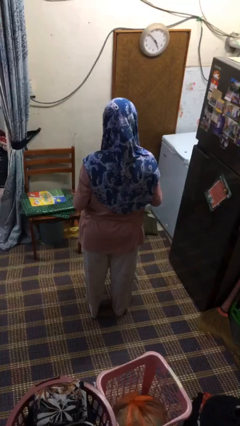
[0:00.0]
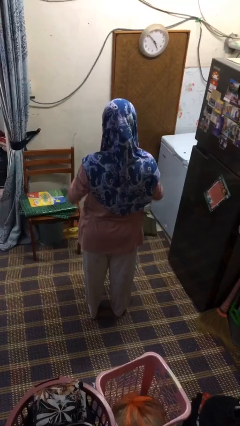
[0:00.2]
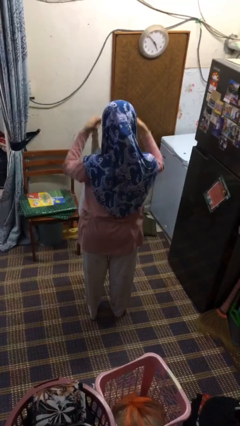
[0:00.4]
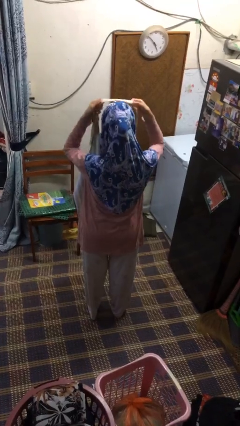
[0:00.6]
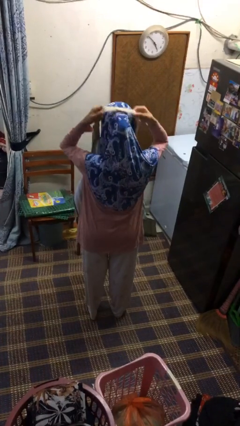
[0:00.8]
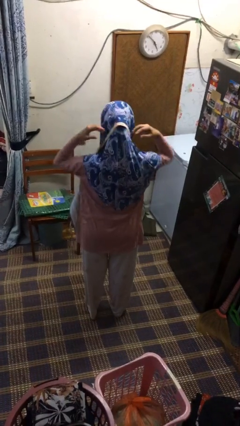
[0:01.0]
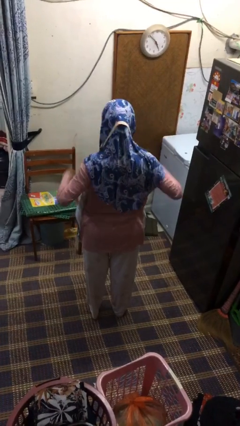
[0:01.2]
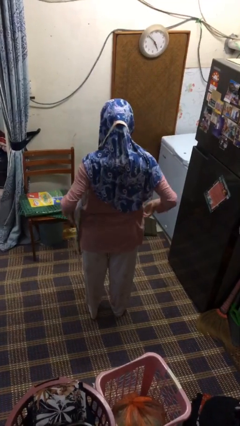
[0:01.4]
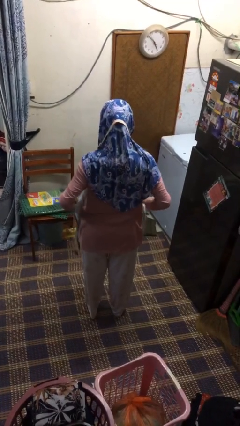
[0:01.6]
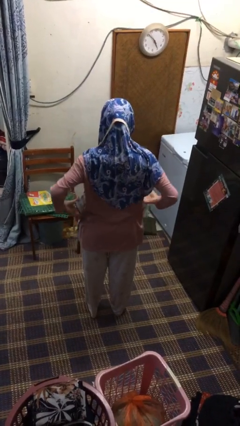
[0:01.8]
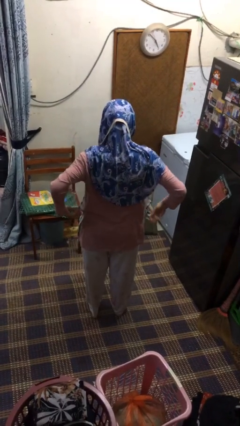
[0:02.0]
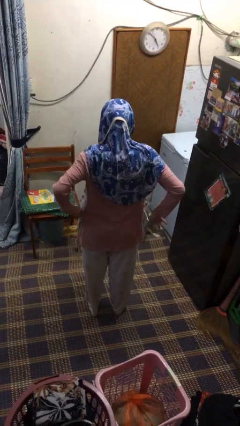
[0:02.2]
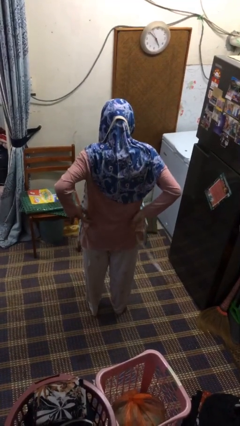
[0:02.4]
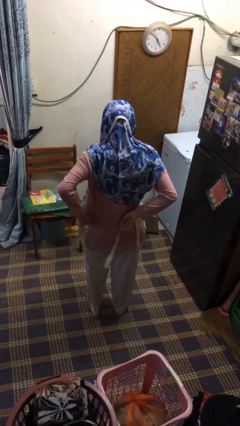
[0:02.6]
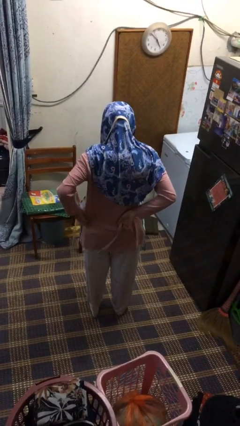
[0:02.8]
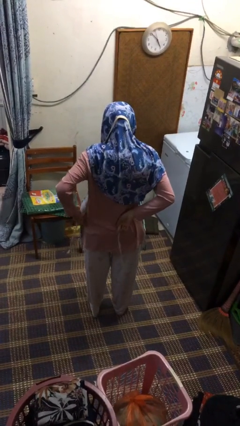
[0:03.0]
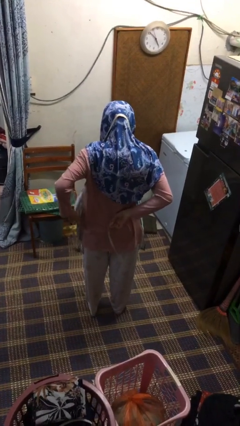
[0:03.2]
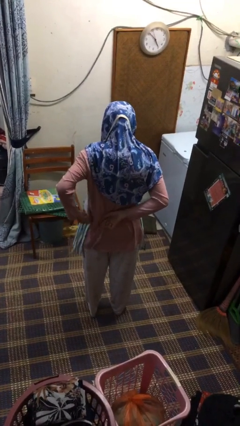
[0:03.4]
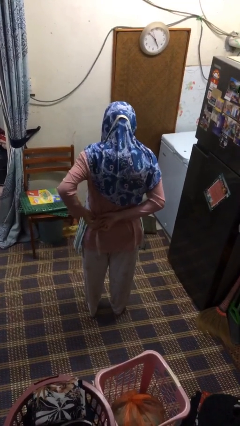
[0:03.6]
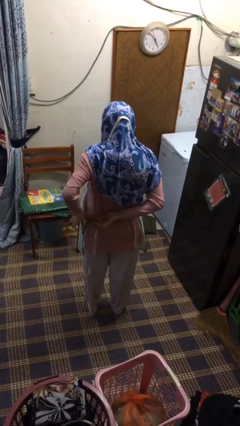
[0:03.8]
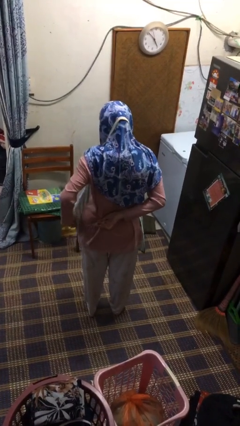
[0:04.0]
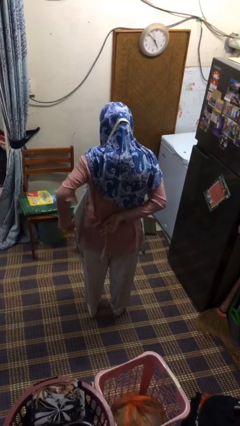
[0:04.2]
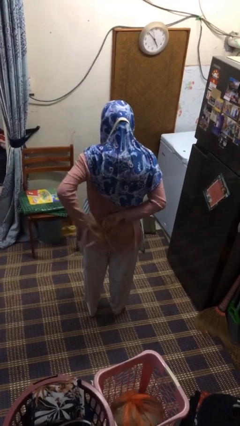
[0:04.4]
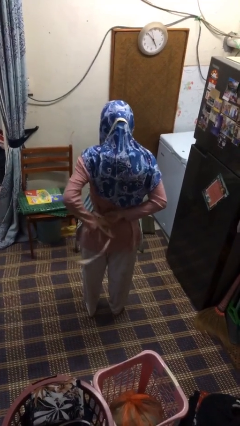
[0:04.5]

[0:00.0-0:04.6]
person puts on apron

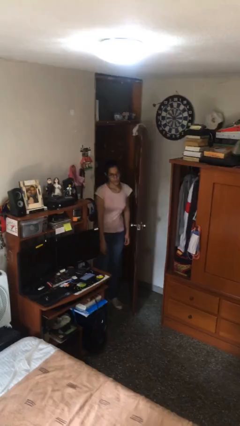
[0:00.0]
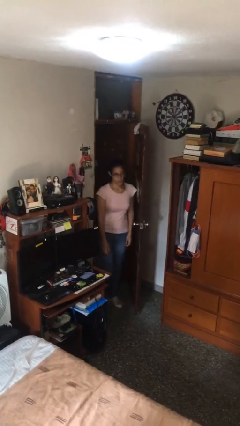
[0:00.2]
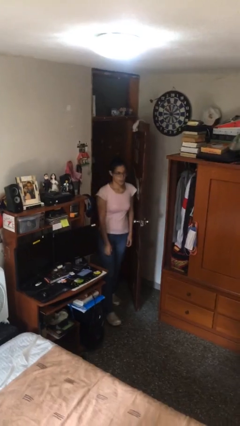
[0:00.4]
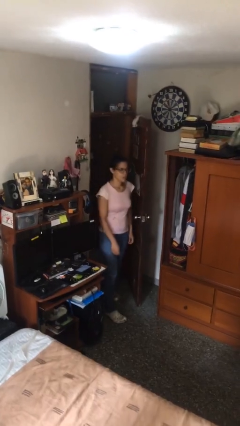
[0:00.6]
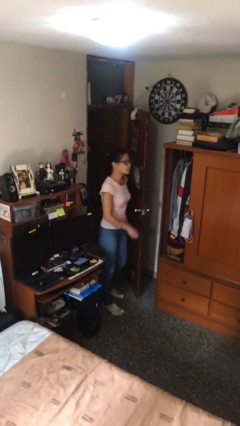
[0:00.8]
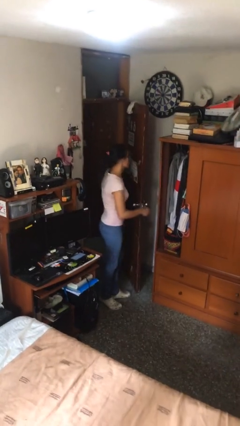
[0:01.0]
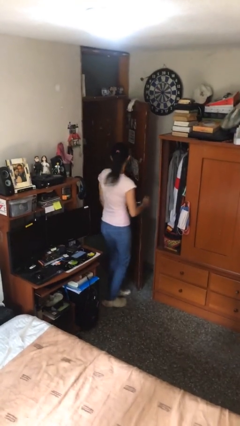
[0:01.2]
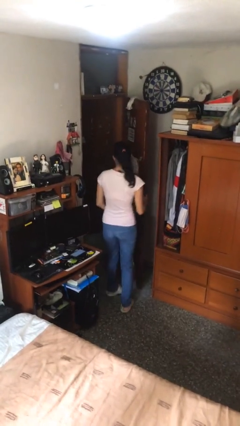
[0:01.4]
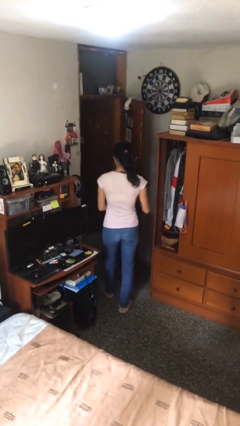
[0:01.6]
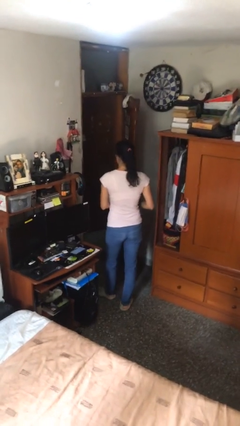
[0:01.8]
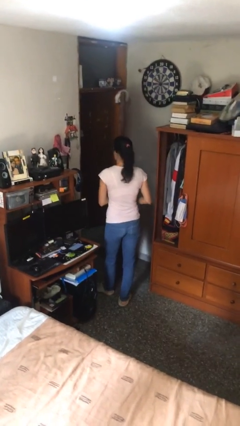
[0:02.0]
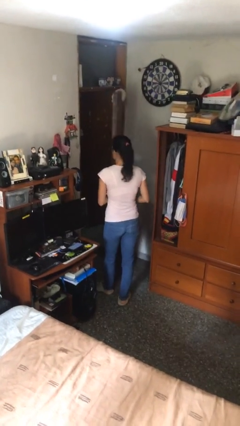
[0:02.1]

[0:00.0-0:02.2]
person enters scene through structure

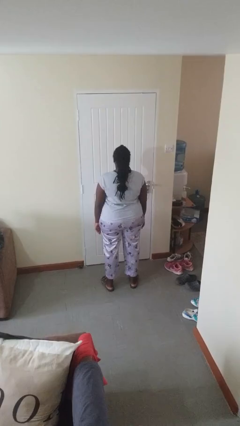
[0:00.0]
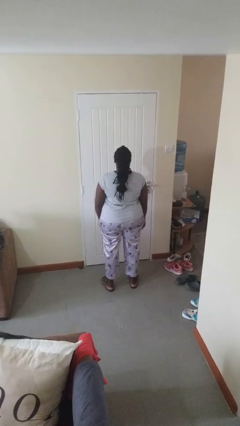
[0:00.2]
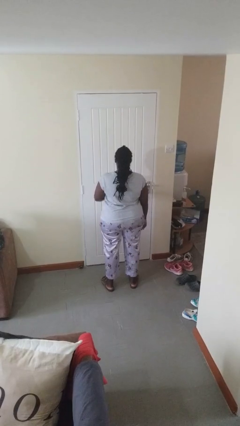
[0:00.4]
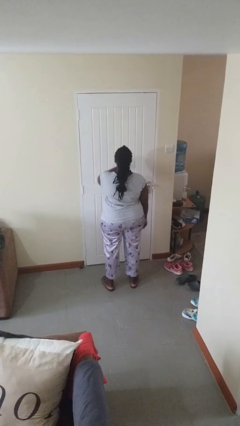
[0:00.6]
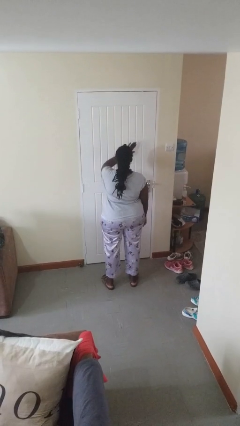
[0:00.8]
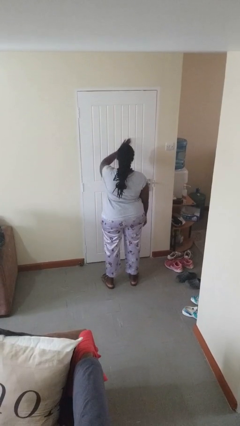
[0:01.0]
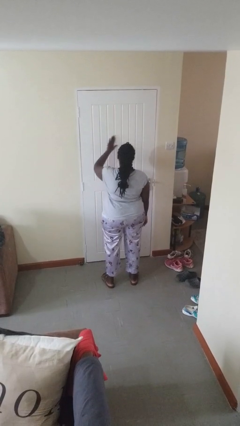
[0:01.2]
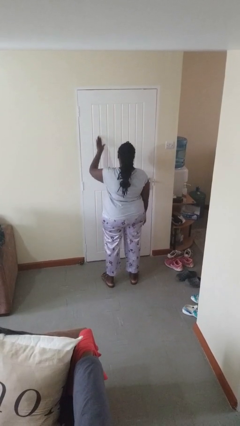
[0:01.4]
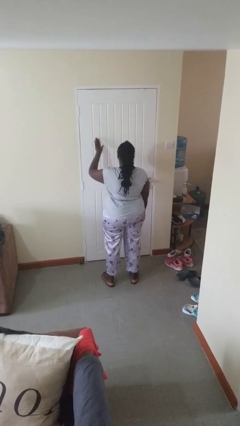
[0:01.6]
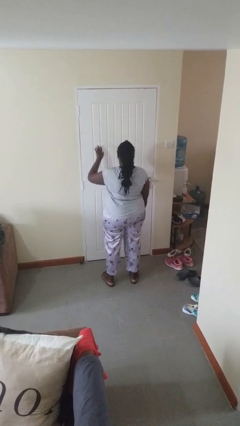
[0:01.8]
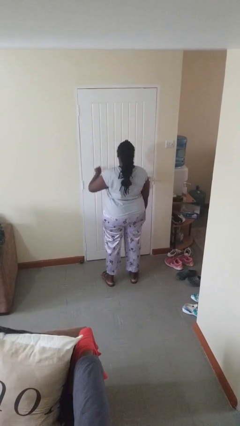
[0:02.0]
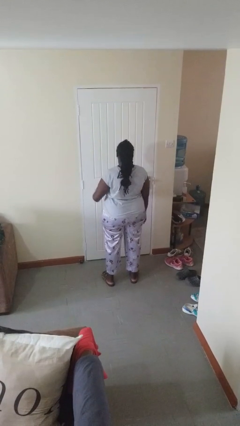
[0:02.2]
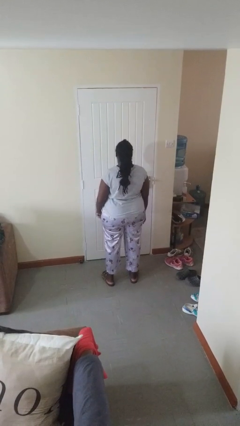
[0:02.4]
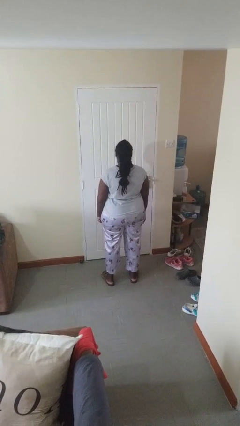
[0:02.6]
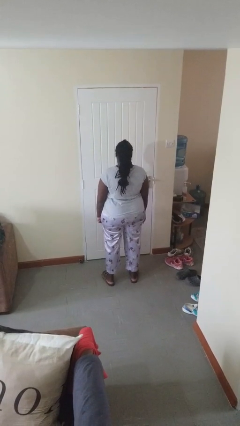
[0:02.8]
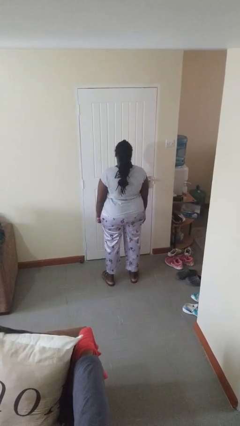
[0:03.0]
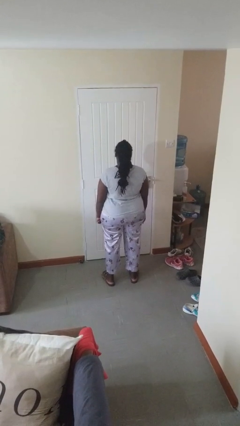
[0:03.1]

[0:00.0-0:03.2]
person gestures swipe left

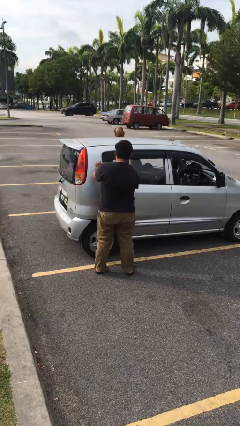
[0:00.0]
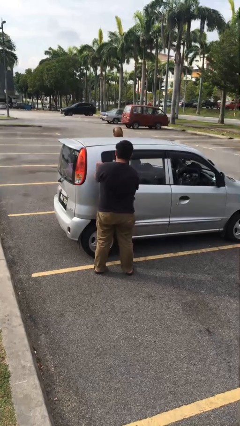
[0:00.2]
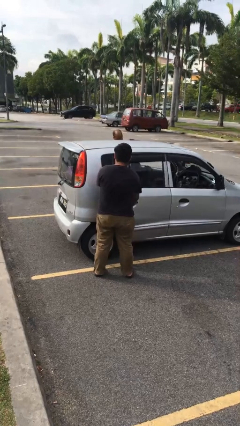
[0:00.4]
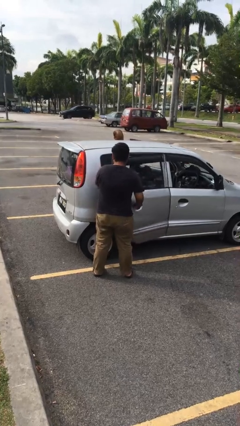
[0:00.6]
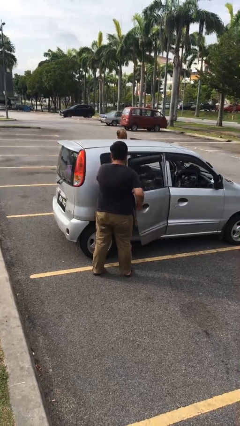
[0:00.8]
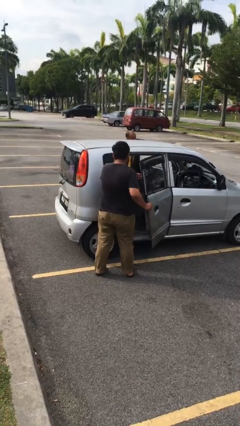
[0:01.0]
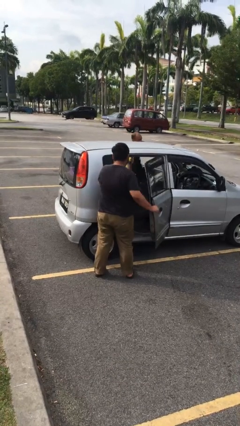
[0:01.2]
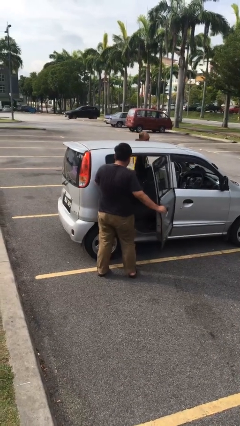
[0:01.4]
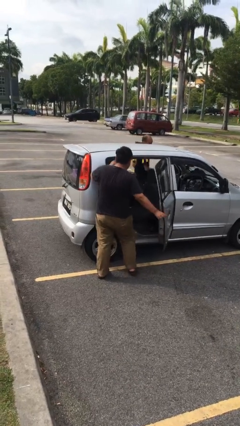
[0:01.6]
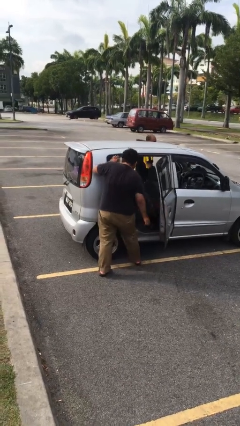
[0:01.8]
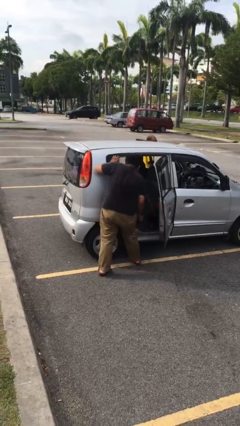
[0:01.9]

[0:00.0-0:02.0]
person opens car door

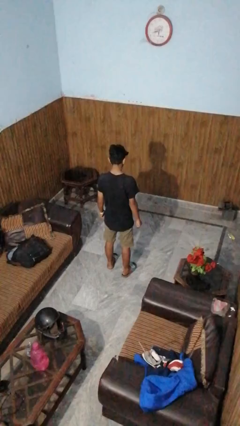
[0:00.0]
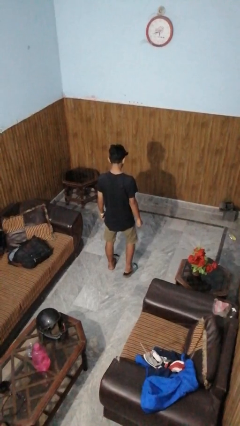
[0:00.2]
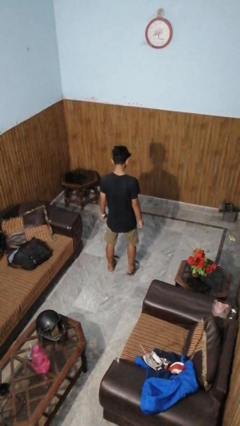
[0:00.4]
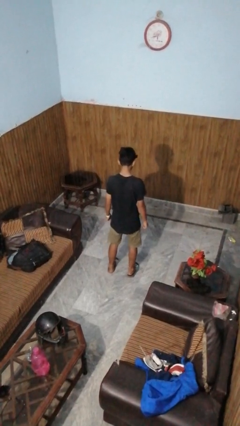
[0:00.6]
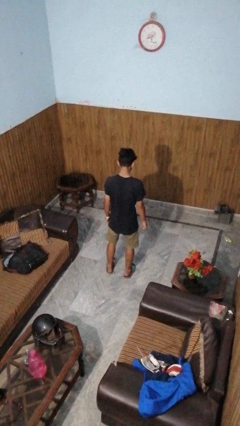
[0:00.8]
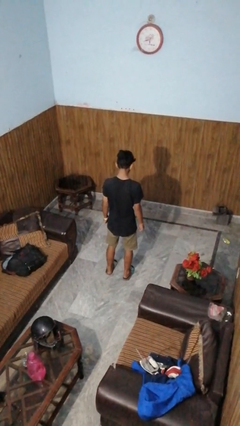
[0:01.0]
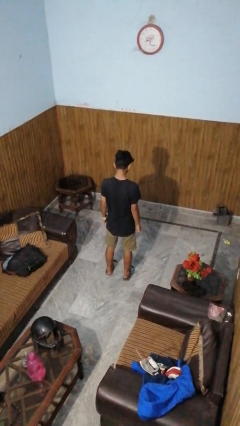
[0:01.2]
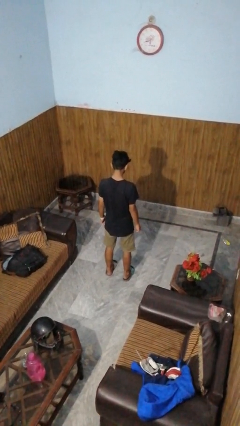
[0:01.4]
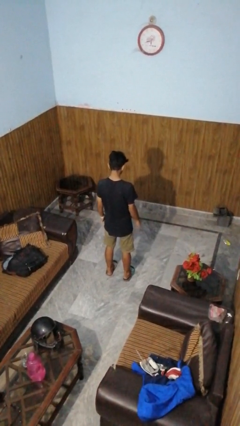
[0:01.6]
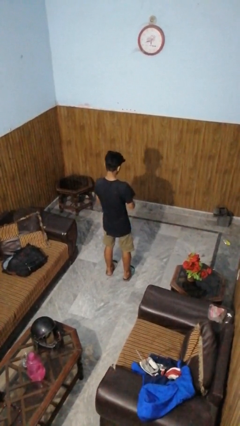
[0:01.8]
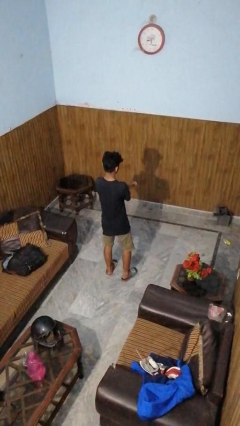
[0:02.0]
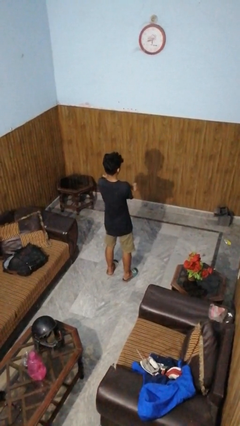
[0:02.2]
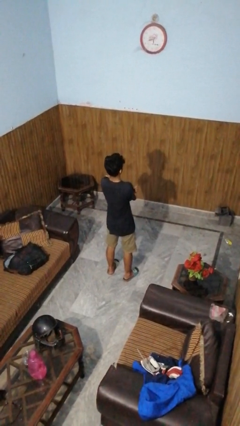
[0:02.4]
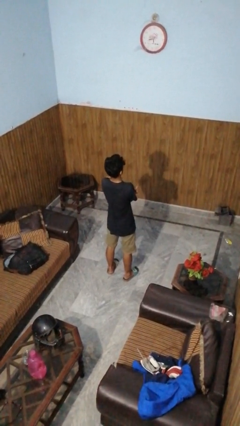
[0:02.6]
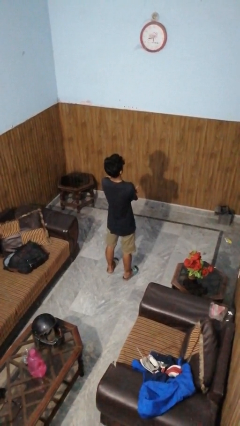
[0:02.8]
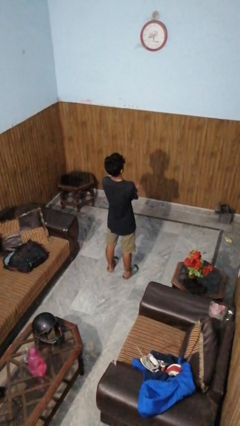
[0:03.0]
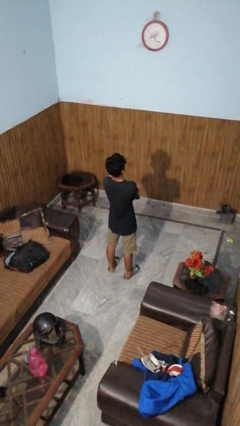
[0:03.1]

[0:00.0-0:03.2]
person crosses arms

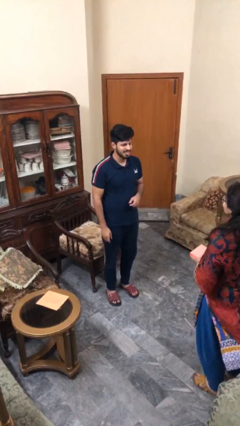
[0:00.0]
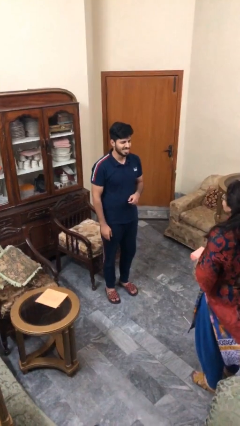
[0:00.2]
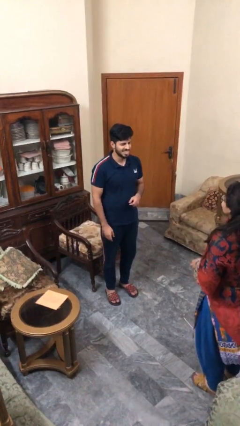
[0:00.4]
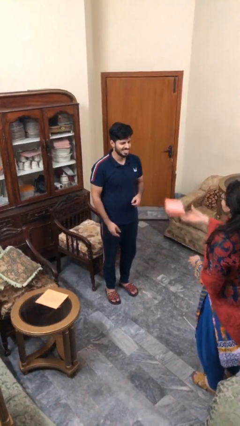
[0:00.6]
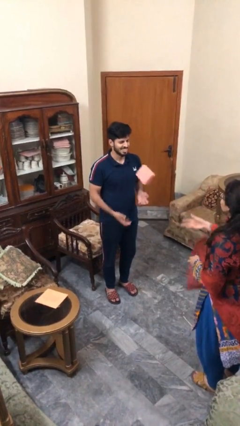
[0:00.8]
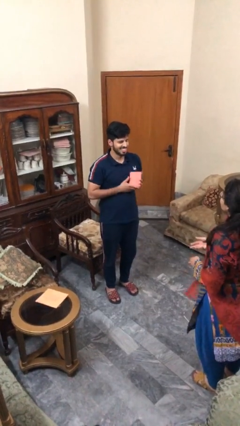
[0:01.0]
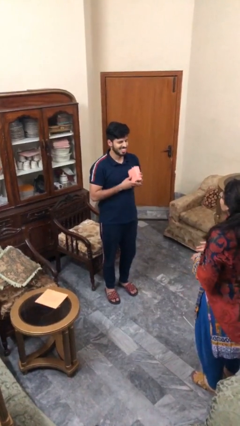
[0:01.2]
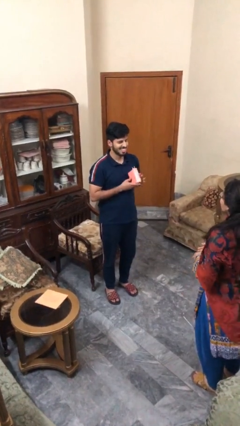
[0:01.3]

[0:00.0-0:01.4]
person catches object from person

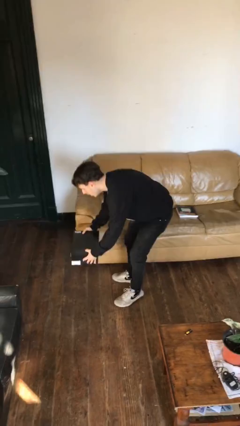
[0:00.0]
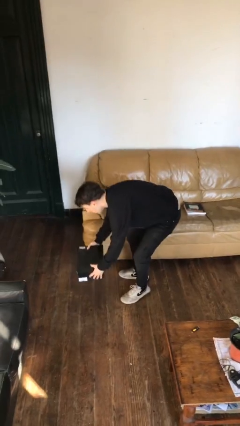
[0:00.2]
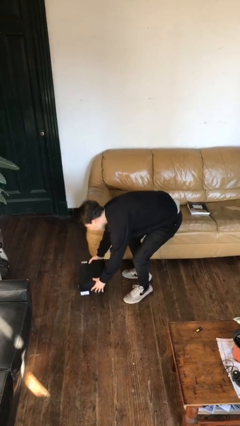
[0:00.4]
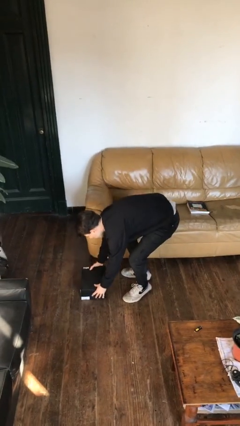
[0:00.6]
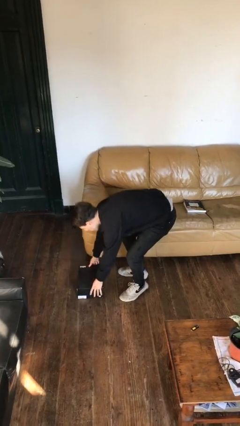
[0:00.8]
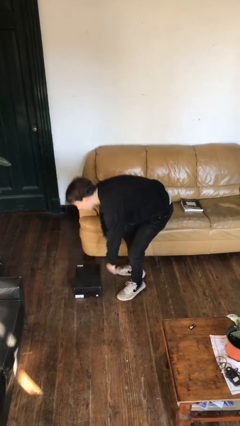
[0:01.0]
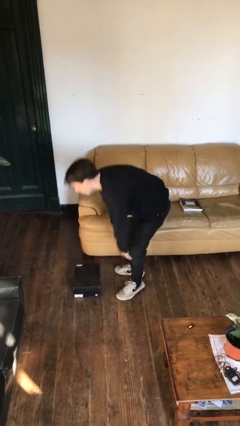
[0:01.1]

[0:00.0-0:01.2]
person puts down object on floor
